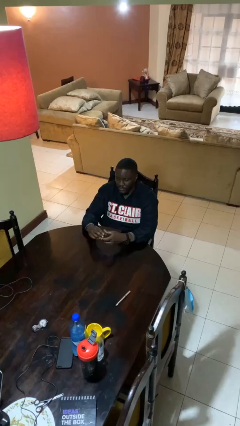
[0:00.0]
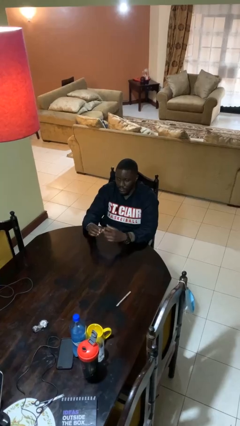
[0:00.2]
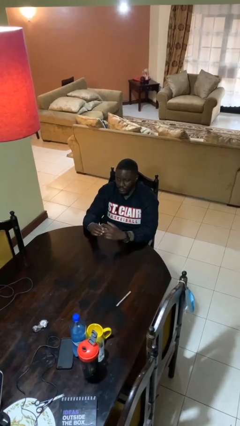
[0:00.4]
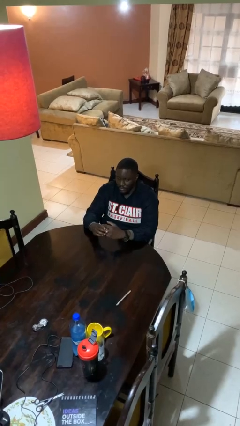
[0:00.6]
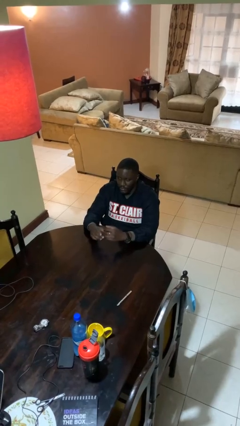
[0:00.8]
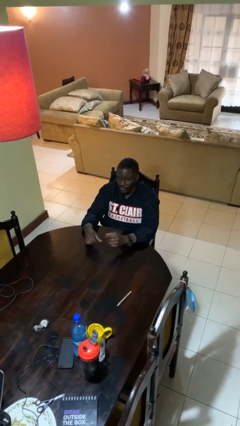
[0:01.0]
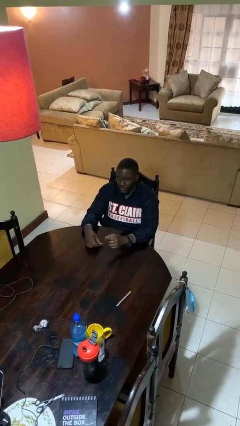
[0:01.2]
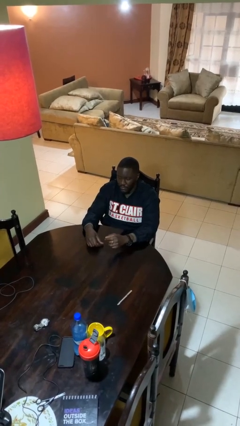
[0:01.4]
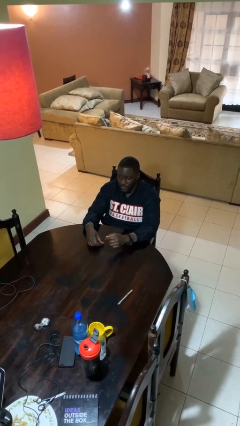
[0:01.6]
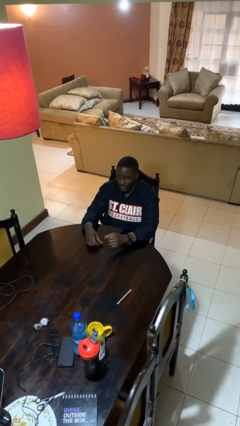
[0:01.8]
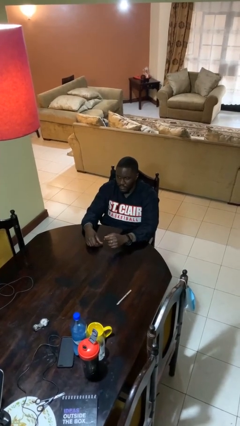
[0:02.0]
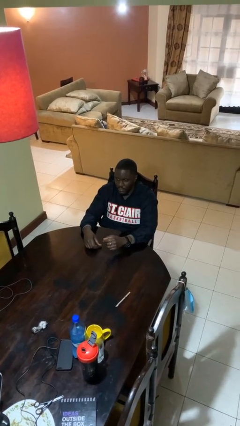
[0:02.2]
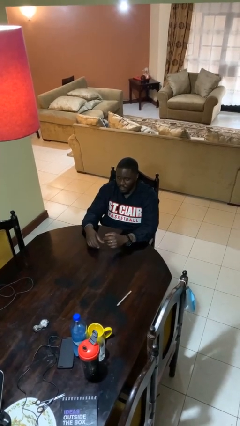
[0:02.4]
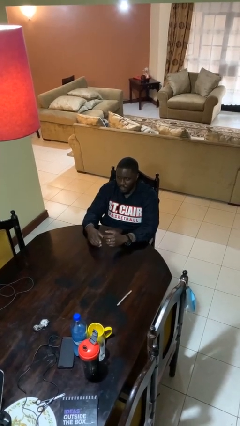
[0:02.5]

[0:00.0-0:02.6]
person puts on ring

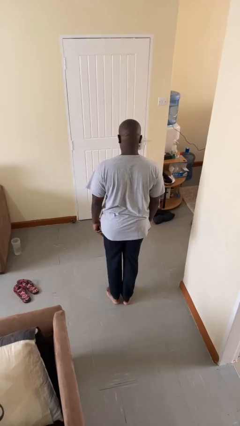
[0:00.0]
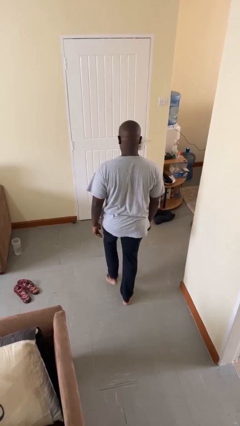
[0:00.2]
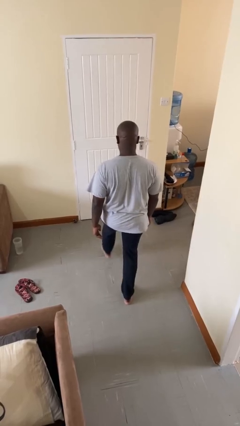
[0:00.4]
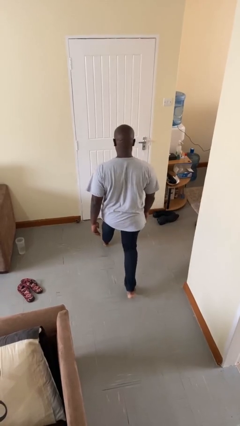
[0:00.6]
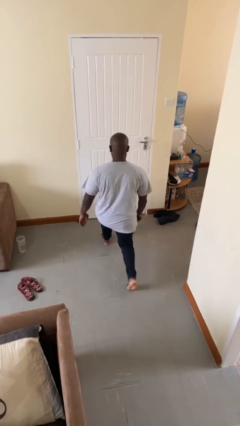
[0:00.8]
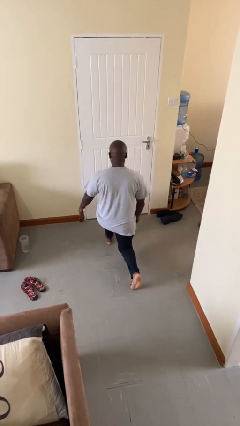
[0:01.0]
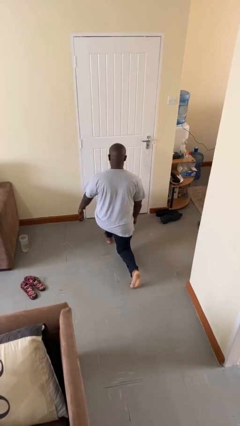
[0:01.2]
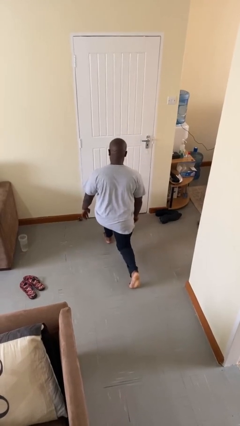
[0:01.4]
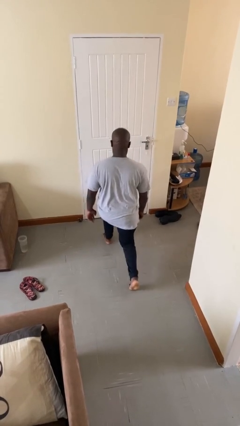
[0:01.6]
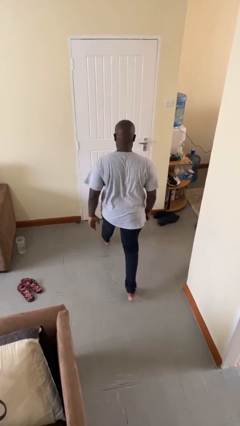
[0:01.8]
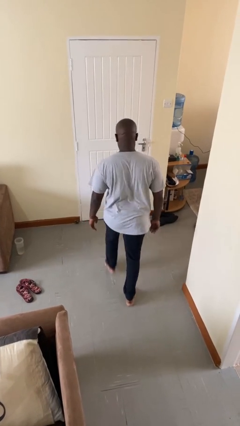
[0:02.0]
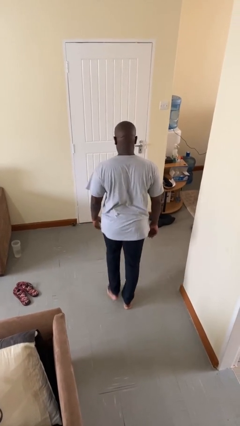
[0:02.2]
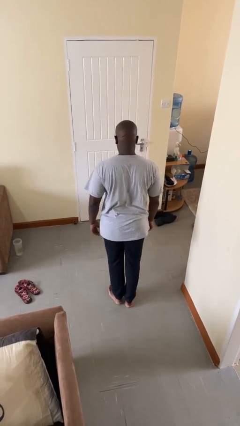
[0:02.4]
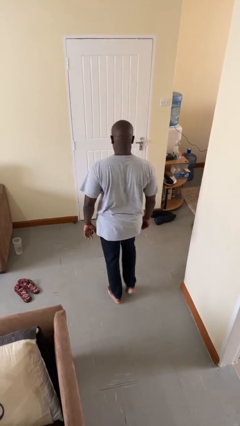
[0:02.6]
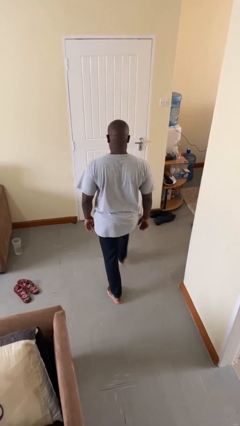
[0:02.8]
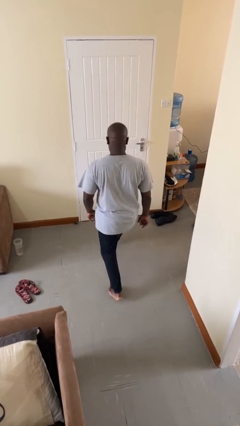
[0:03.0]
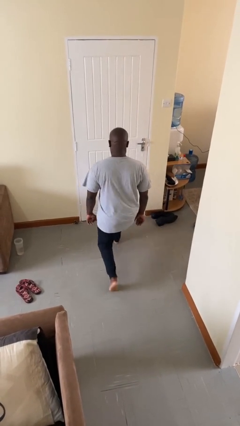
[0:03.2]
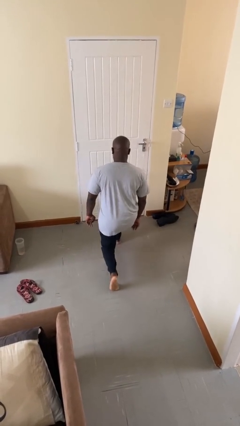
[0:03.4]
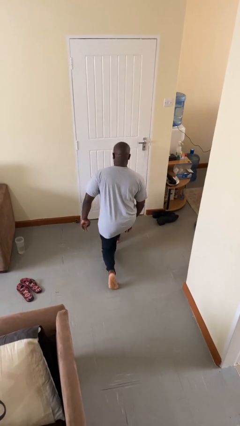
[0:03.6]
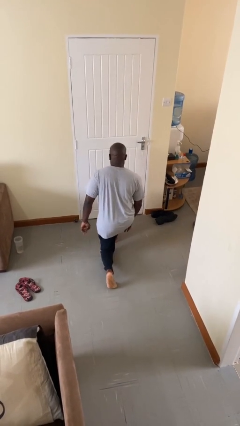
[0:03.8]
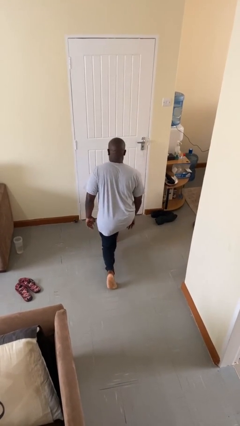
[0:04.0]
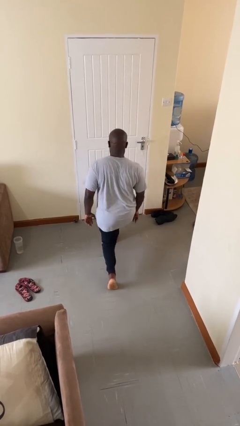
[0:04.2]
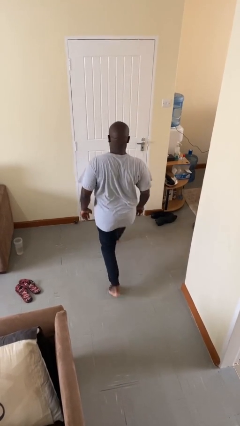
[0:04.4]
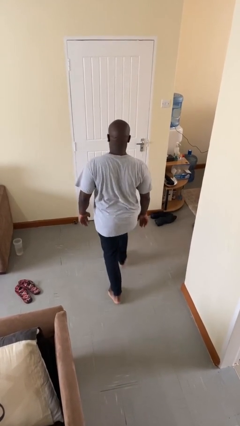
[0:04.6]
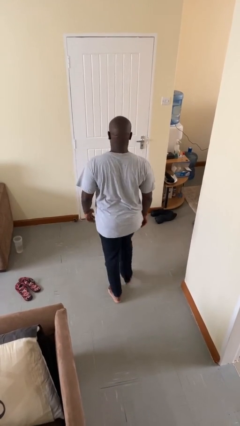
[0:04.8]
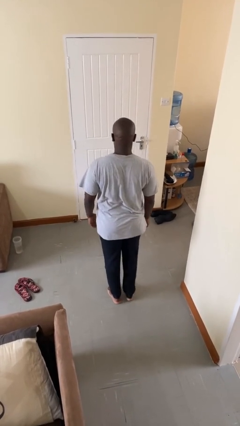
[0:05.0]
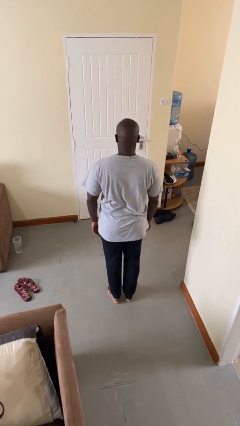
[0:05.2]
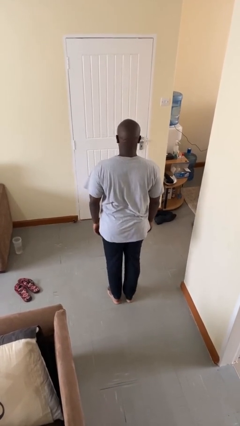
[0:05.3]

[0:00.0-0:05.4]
person exercises with lunges

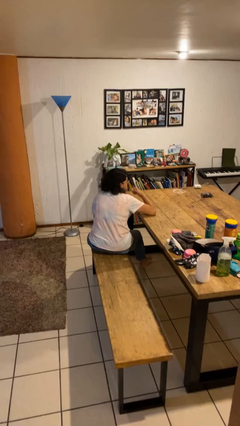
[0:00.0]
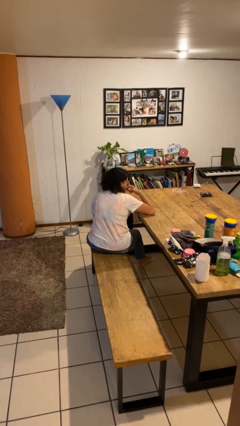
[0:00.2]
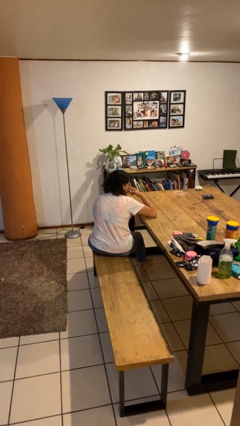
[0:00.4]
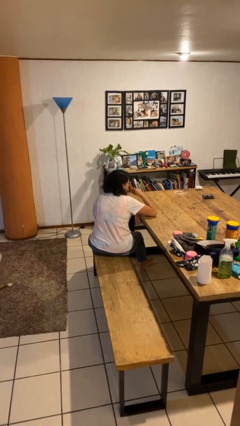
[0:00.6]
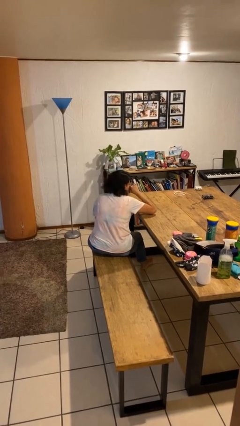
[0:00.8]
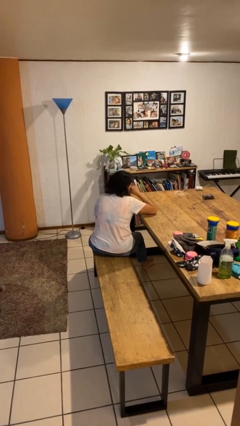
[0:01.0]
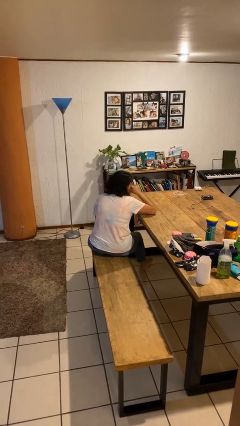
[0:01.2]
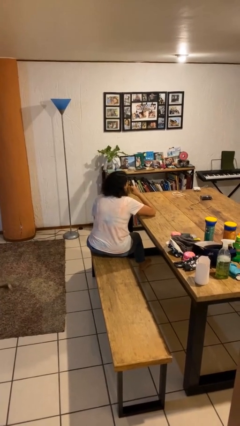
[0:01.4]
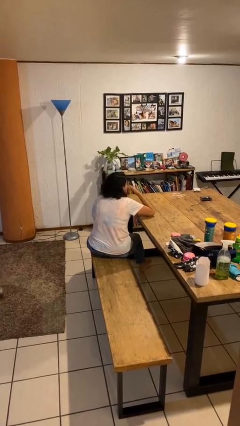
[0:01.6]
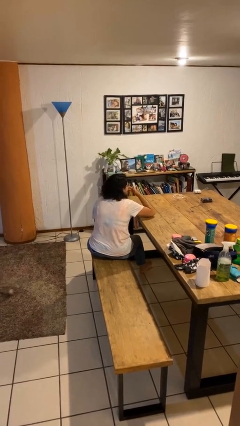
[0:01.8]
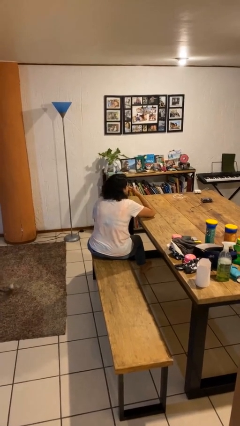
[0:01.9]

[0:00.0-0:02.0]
person licks fingers

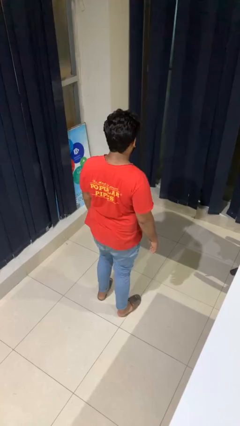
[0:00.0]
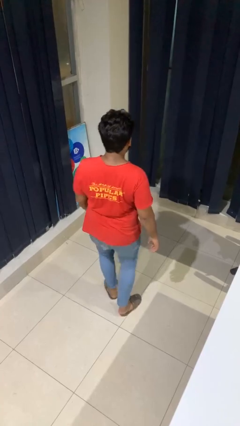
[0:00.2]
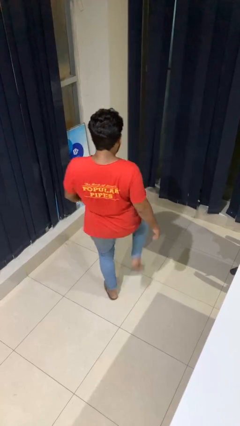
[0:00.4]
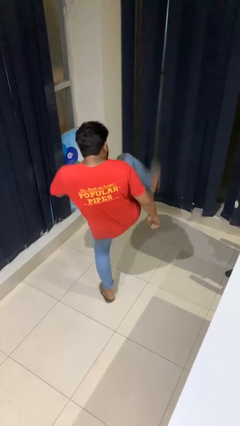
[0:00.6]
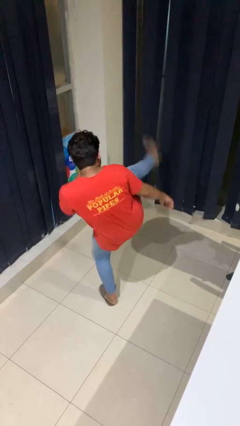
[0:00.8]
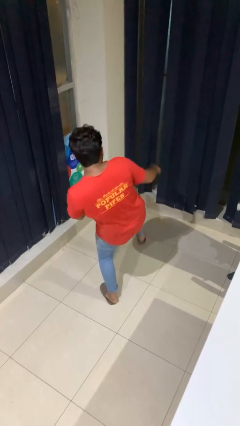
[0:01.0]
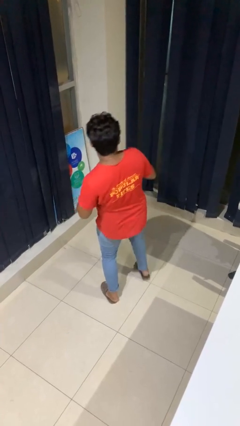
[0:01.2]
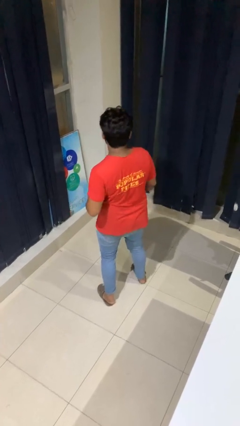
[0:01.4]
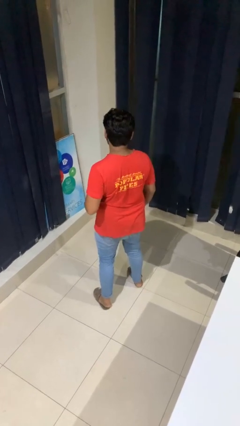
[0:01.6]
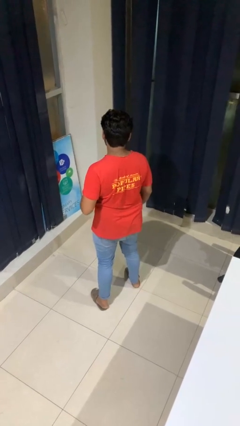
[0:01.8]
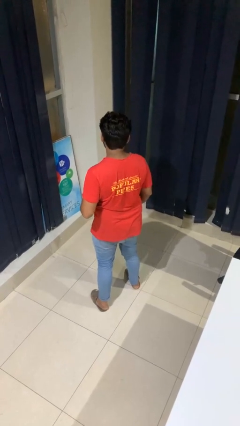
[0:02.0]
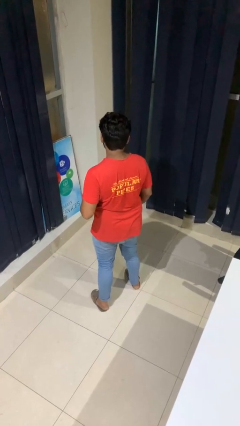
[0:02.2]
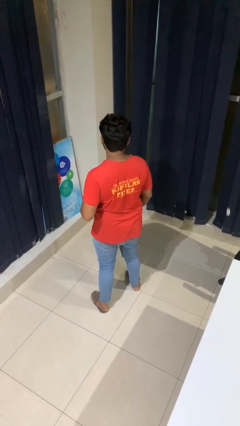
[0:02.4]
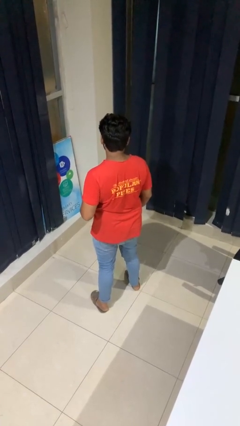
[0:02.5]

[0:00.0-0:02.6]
person karate kicks

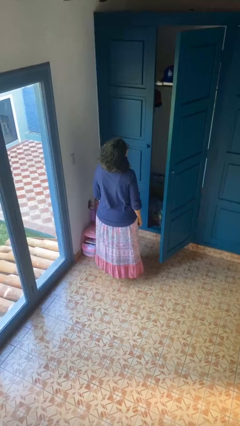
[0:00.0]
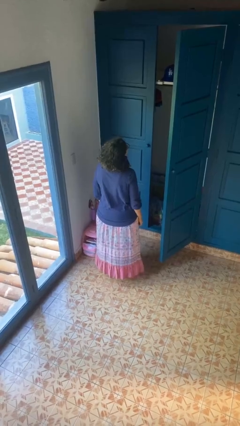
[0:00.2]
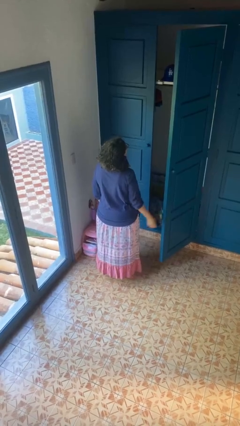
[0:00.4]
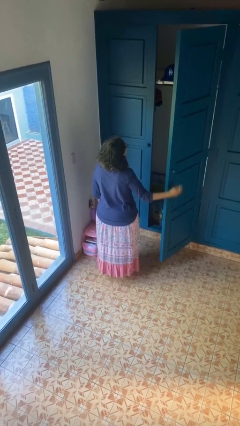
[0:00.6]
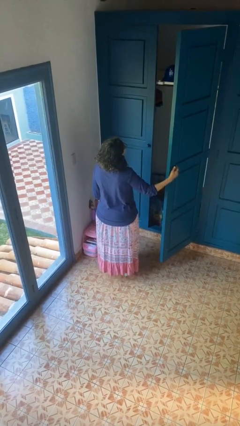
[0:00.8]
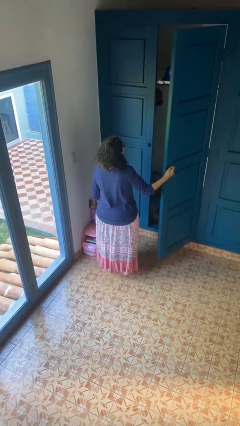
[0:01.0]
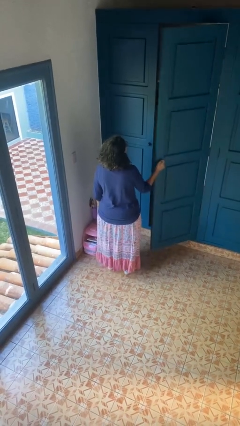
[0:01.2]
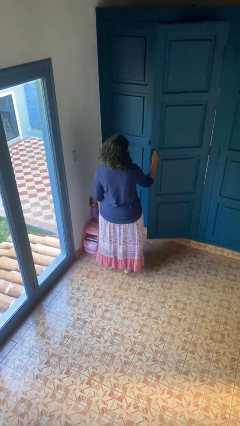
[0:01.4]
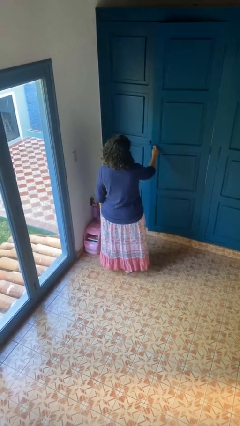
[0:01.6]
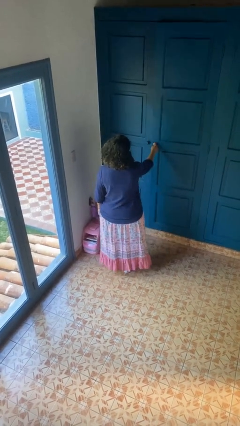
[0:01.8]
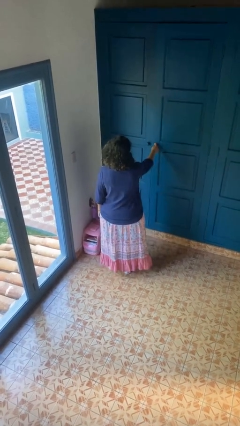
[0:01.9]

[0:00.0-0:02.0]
person closes closet door

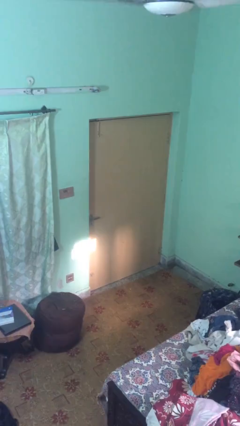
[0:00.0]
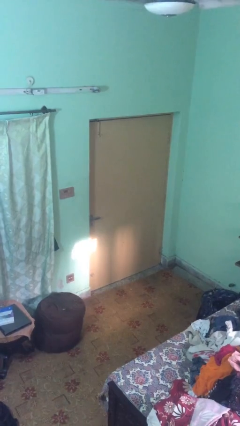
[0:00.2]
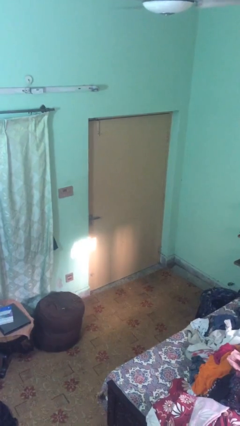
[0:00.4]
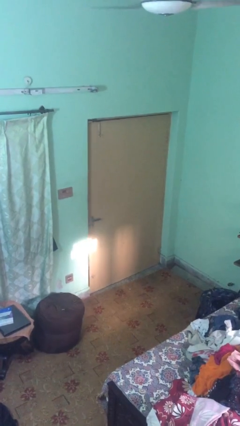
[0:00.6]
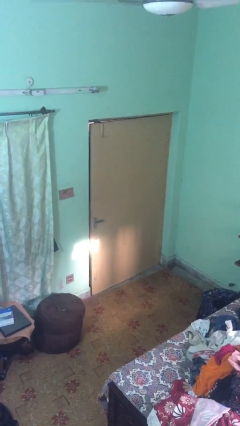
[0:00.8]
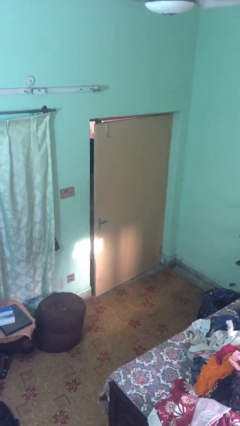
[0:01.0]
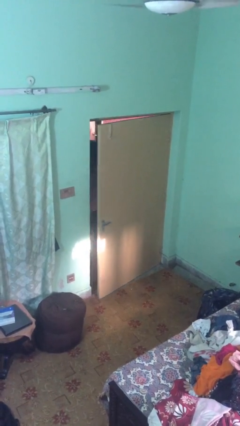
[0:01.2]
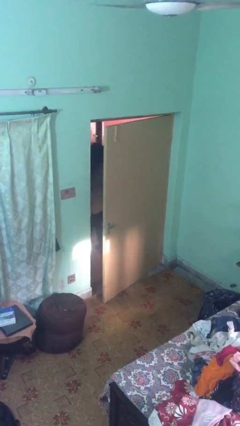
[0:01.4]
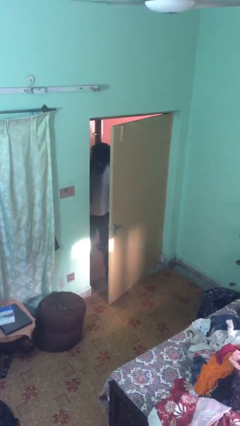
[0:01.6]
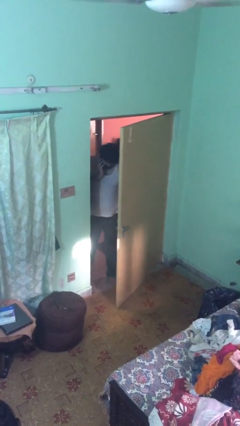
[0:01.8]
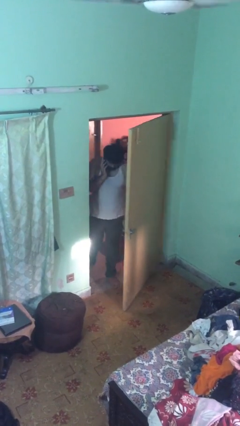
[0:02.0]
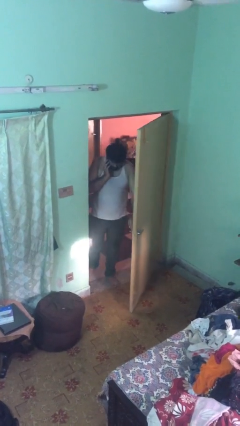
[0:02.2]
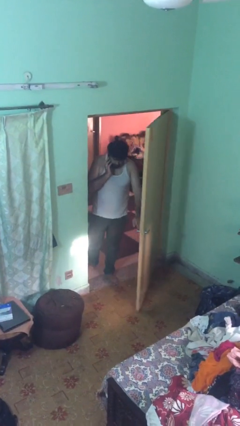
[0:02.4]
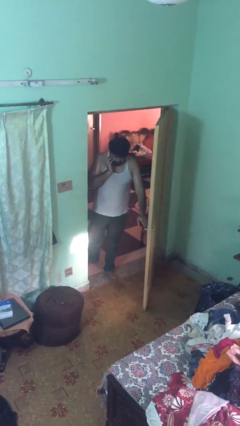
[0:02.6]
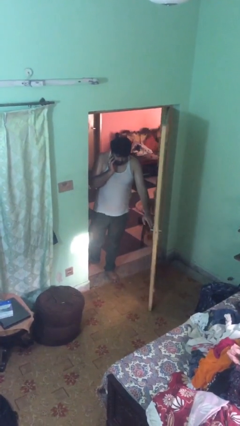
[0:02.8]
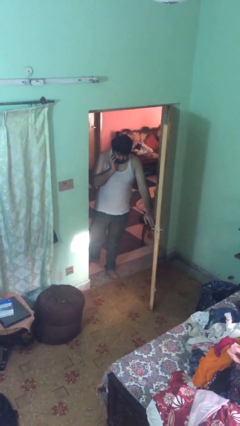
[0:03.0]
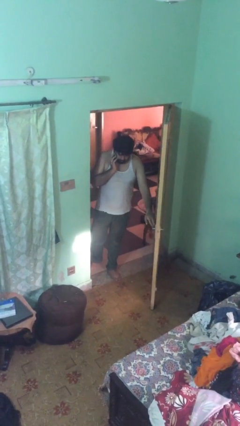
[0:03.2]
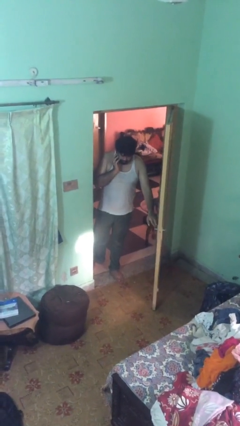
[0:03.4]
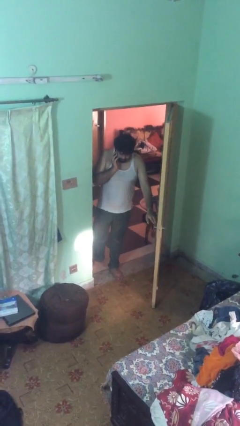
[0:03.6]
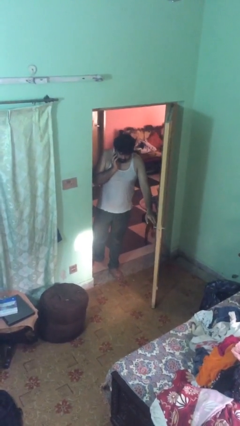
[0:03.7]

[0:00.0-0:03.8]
person opens facility door
